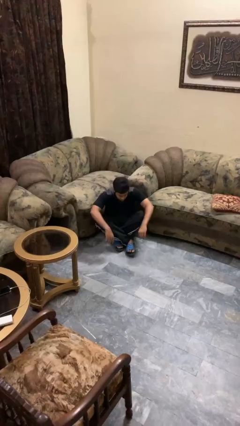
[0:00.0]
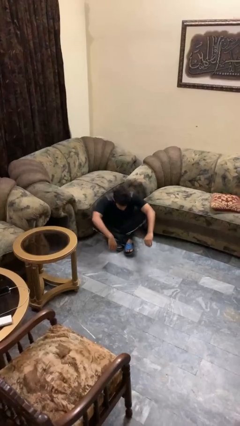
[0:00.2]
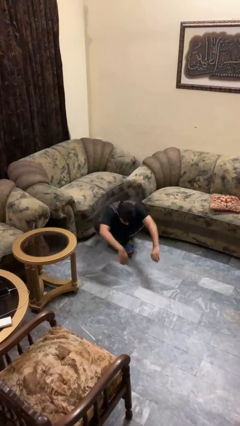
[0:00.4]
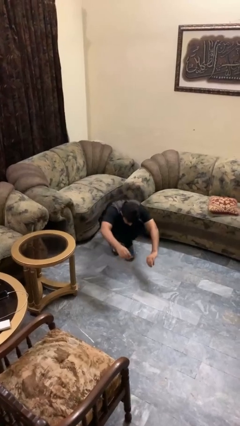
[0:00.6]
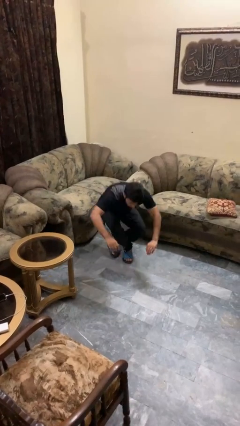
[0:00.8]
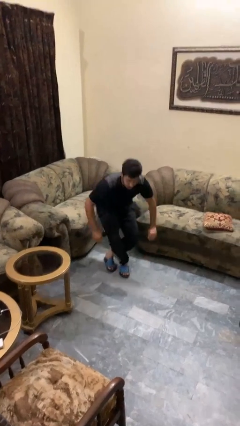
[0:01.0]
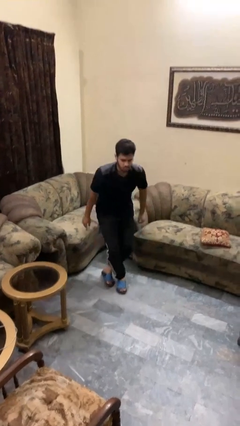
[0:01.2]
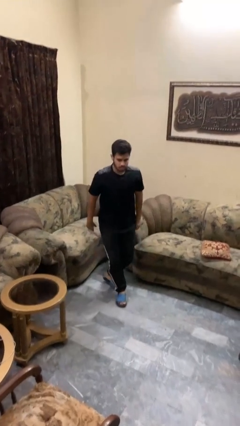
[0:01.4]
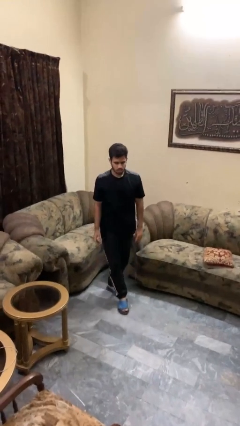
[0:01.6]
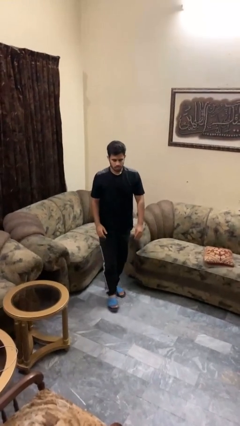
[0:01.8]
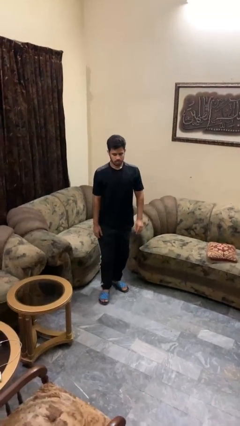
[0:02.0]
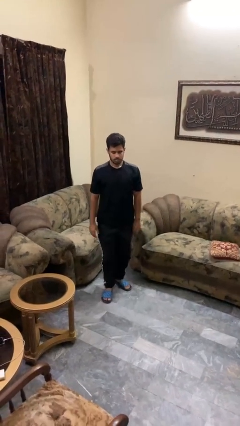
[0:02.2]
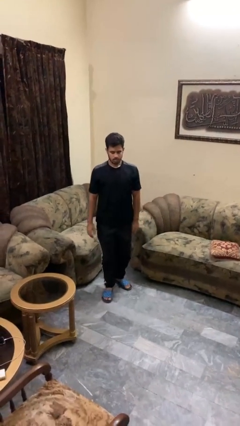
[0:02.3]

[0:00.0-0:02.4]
person stands up from floor

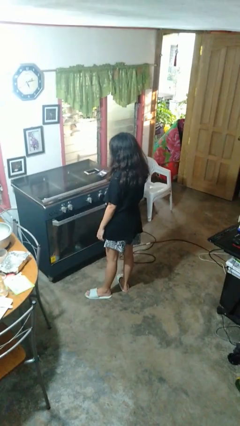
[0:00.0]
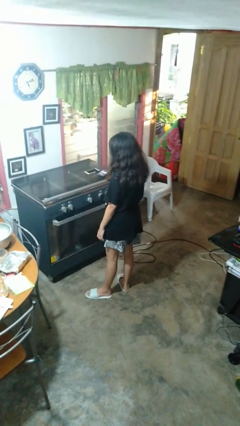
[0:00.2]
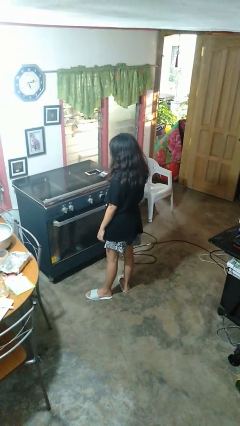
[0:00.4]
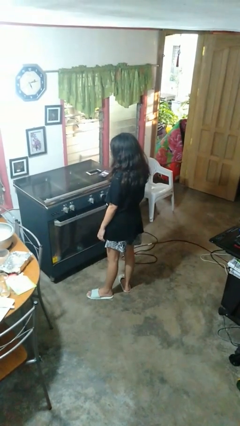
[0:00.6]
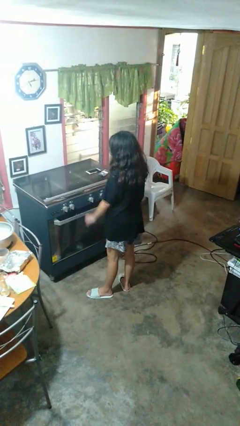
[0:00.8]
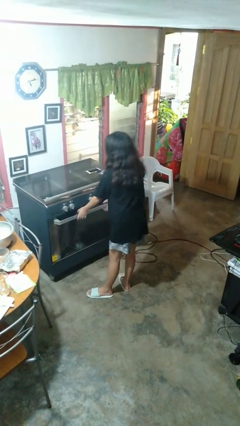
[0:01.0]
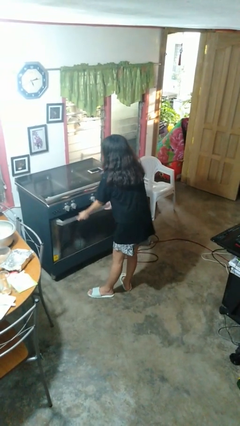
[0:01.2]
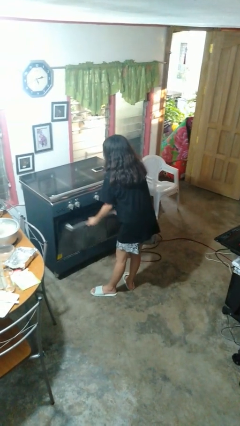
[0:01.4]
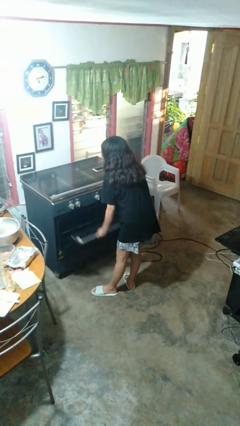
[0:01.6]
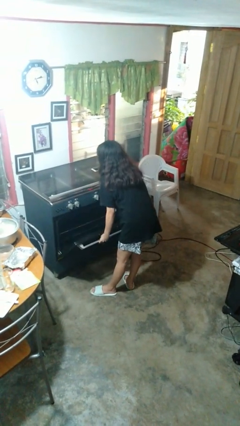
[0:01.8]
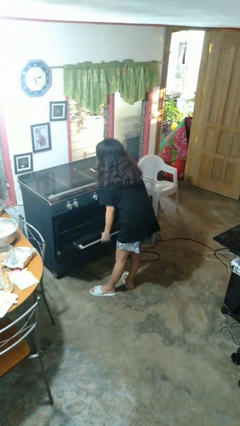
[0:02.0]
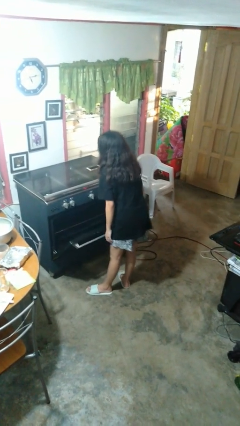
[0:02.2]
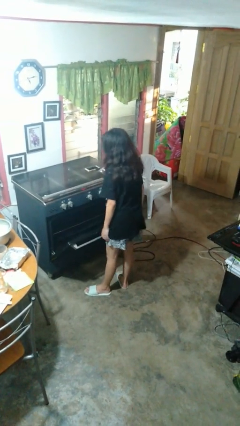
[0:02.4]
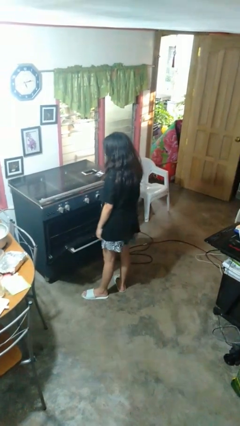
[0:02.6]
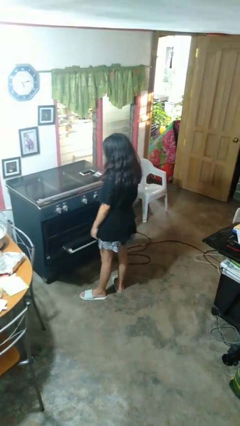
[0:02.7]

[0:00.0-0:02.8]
person opens oven door

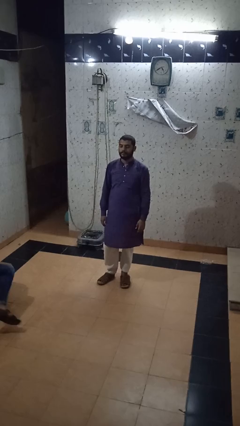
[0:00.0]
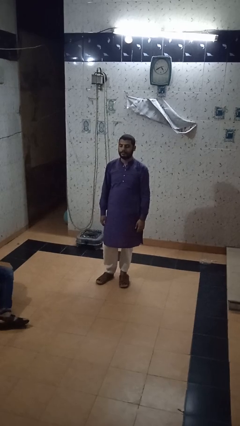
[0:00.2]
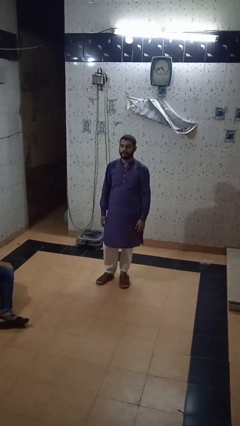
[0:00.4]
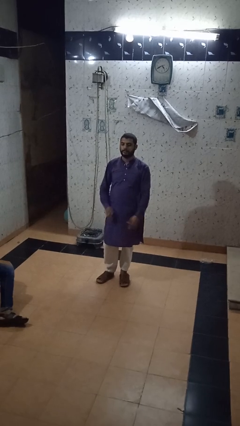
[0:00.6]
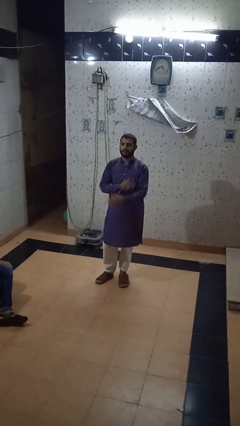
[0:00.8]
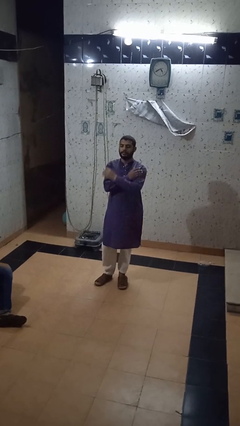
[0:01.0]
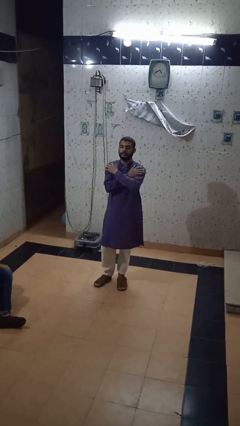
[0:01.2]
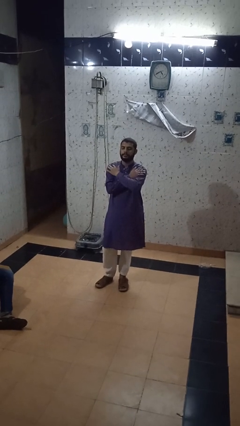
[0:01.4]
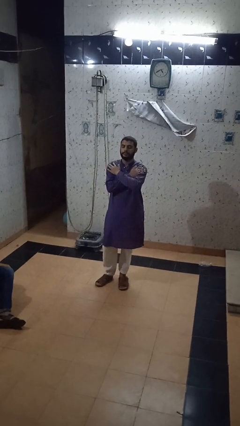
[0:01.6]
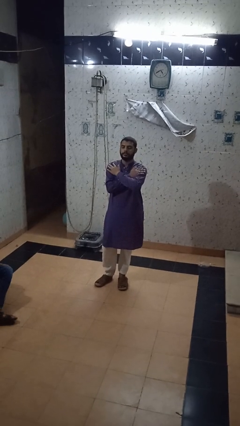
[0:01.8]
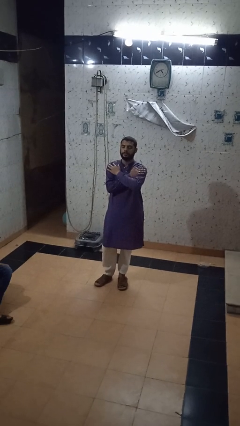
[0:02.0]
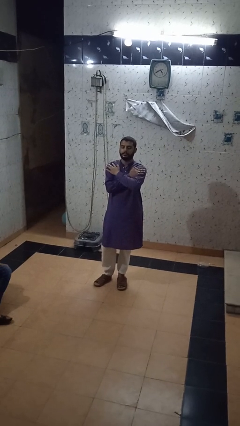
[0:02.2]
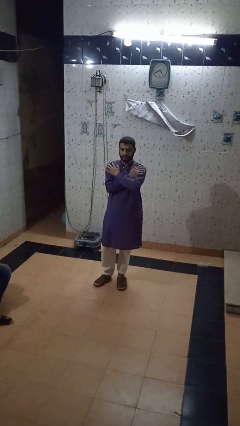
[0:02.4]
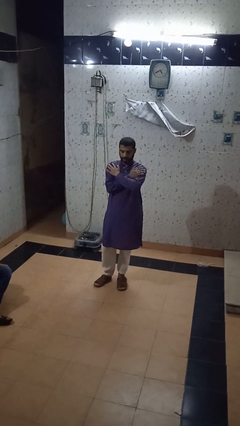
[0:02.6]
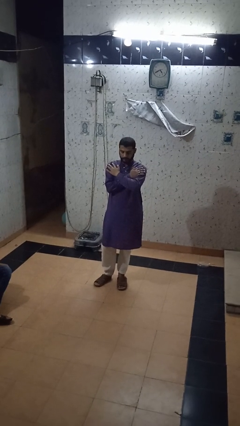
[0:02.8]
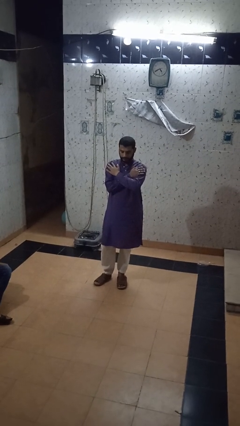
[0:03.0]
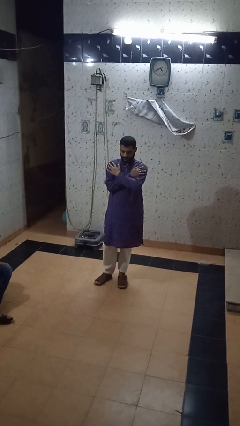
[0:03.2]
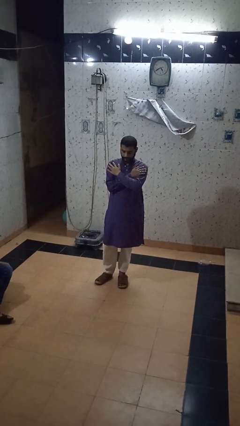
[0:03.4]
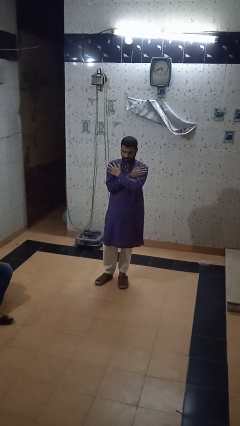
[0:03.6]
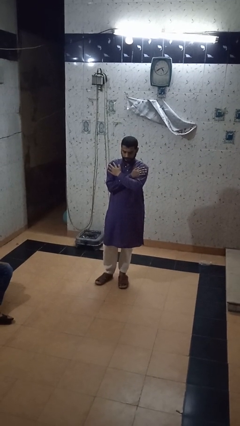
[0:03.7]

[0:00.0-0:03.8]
person crosses arms

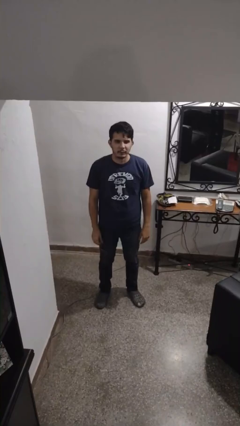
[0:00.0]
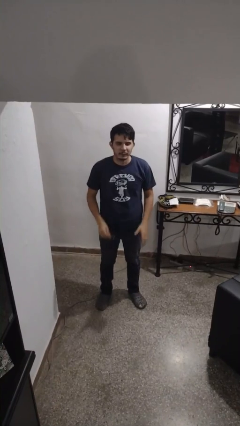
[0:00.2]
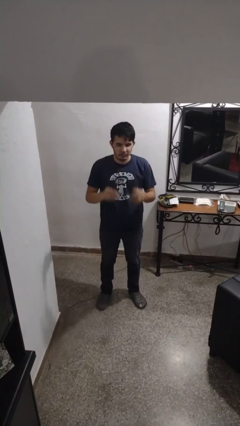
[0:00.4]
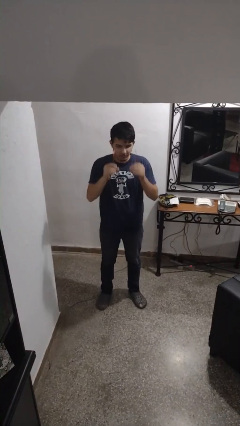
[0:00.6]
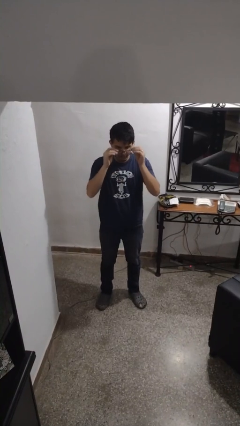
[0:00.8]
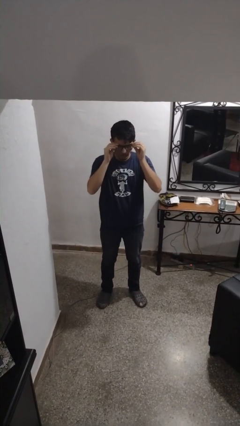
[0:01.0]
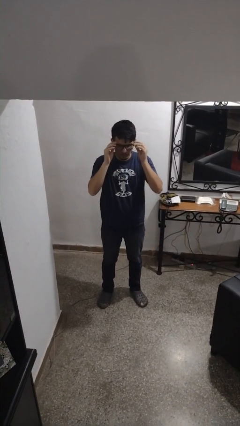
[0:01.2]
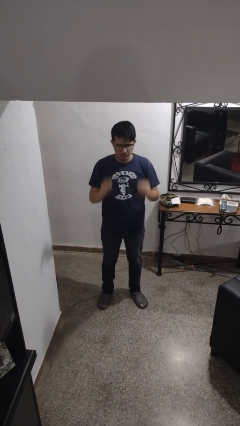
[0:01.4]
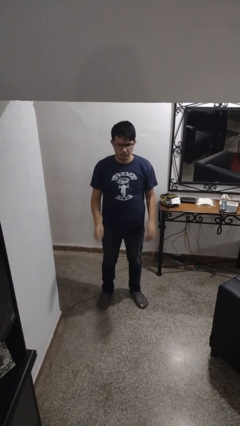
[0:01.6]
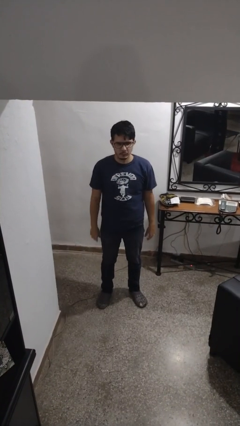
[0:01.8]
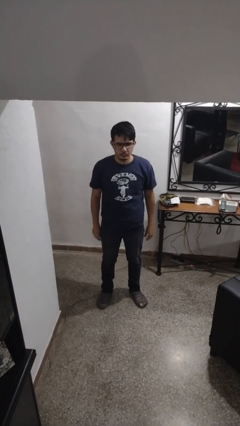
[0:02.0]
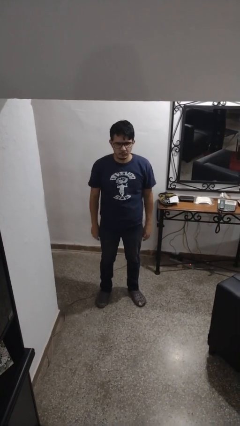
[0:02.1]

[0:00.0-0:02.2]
person puts on glasses

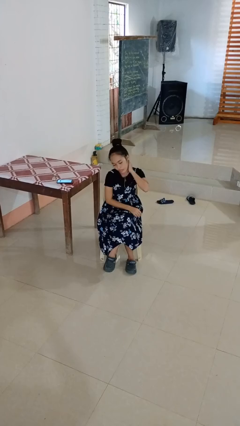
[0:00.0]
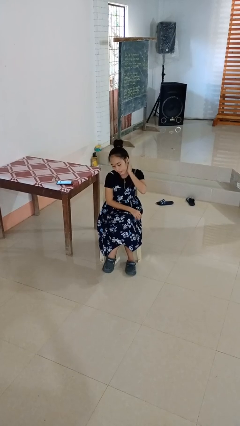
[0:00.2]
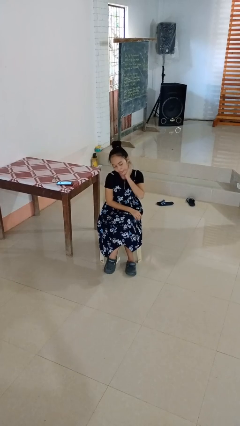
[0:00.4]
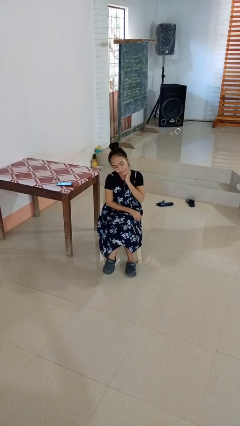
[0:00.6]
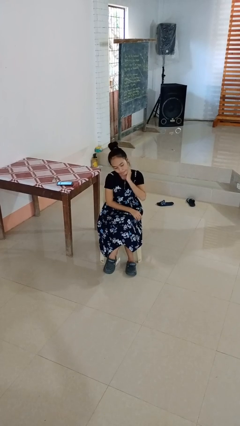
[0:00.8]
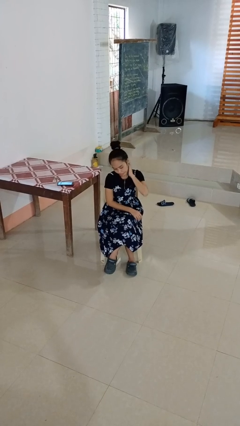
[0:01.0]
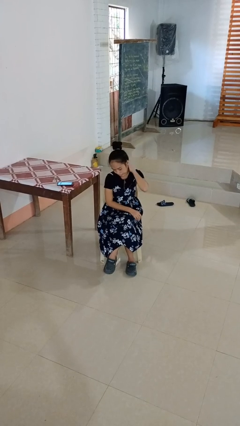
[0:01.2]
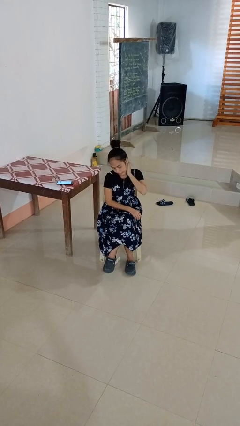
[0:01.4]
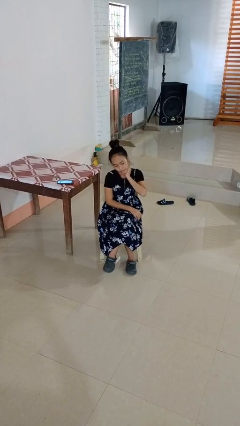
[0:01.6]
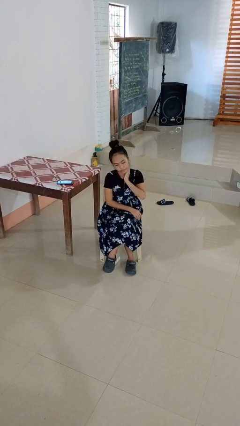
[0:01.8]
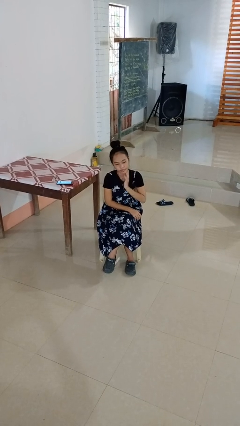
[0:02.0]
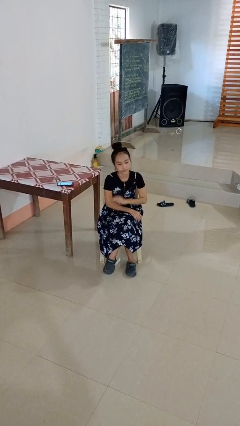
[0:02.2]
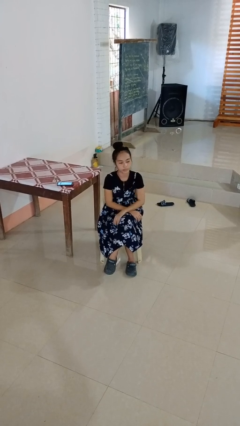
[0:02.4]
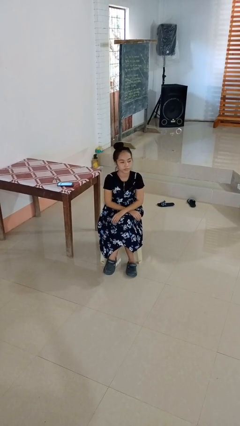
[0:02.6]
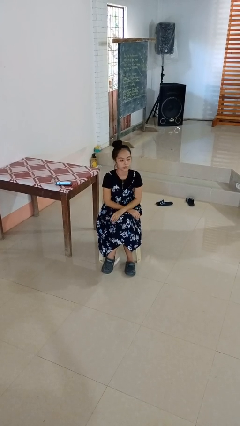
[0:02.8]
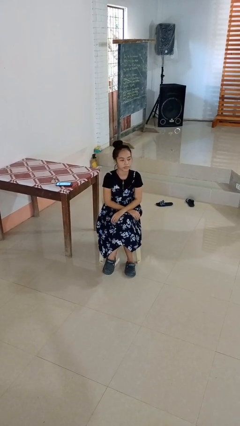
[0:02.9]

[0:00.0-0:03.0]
person rubs neck

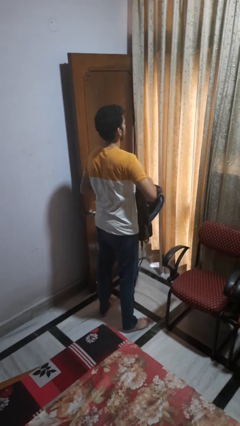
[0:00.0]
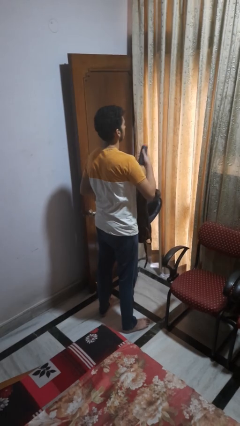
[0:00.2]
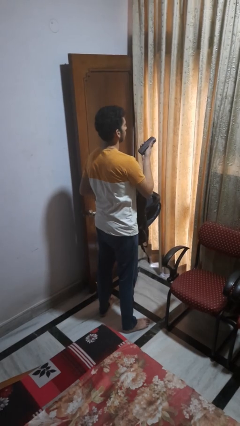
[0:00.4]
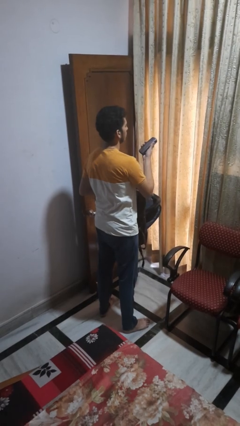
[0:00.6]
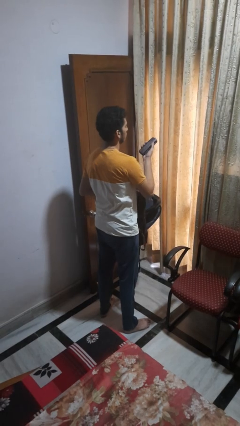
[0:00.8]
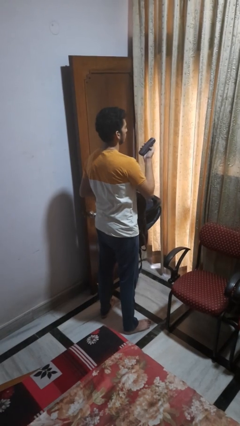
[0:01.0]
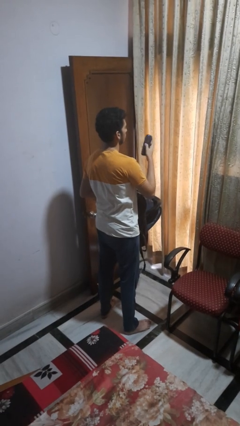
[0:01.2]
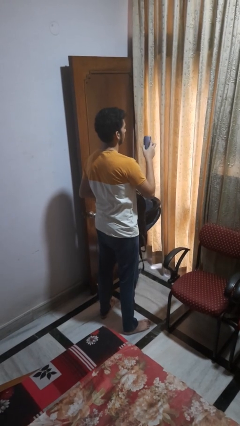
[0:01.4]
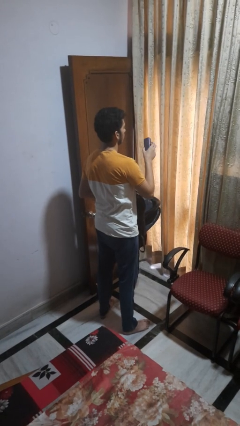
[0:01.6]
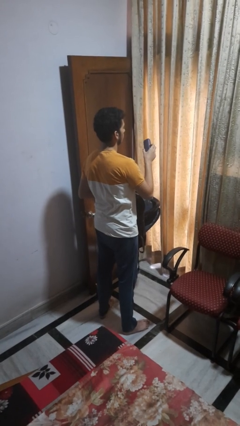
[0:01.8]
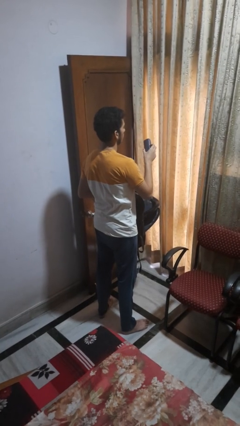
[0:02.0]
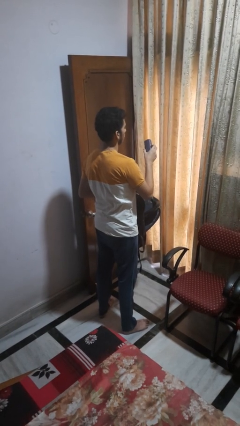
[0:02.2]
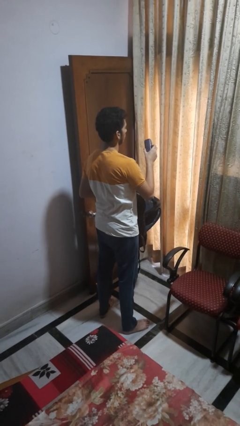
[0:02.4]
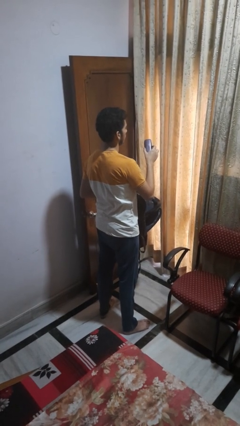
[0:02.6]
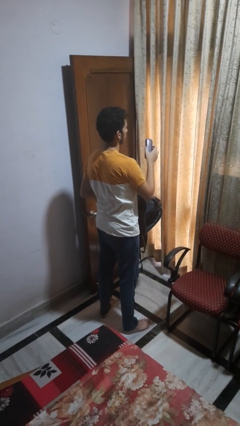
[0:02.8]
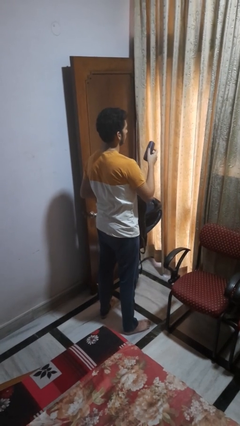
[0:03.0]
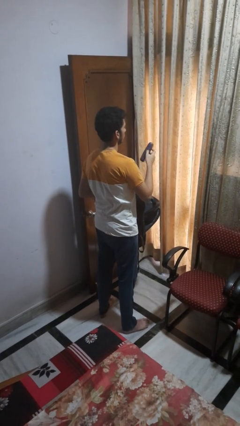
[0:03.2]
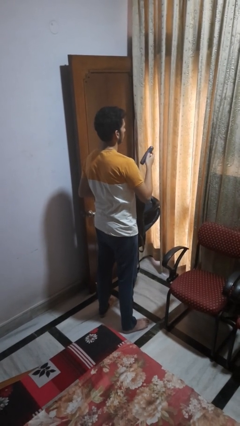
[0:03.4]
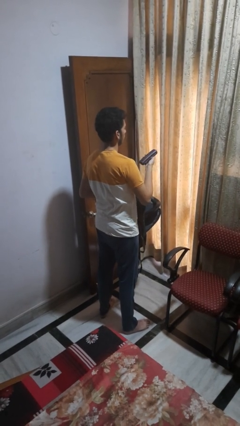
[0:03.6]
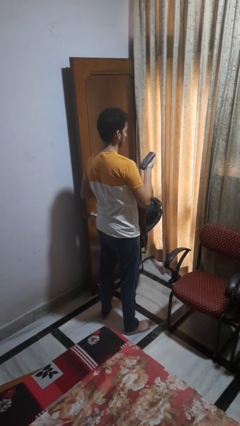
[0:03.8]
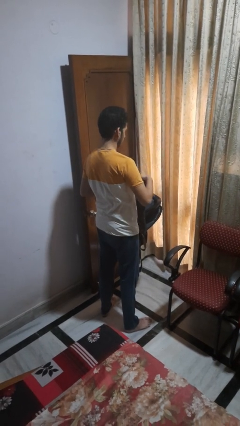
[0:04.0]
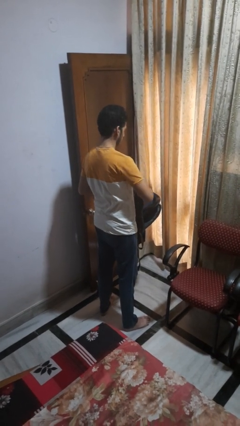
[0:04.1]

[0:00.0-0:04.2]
person takes object from backpack
